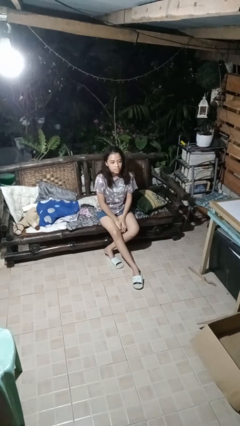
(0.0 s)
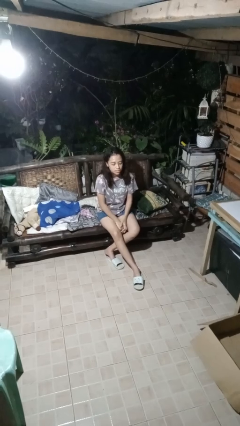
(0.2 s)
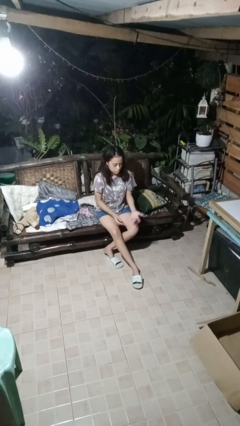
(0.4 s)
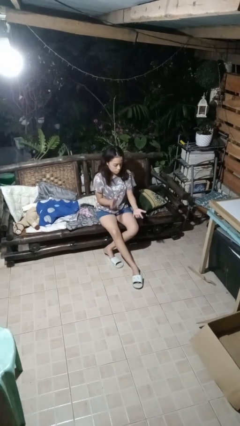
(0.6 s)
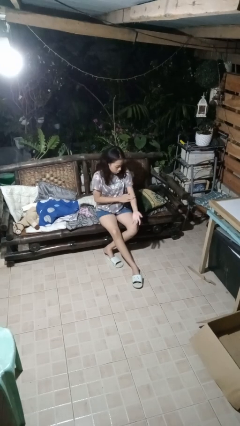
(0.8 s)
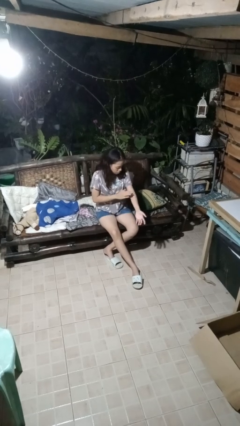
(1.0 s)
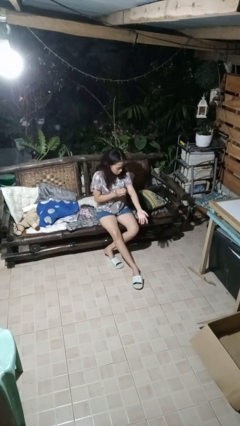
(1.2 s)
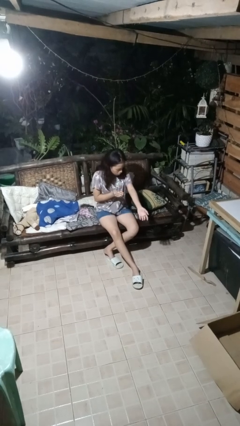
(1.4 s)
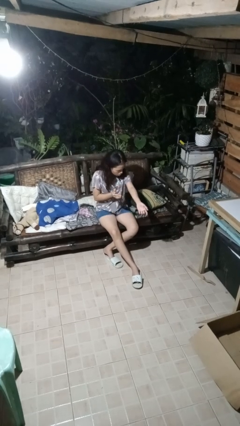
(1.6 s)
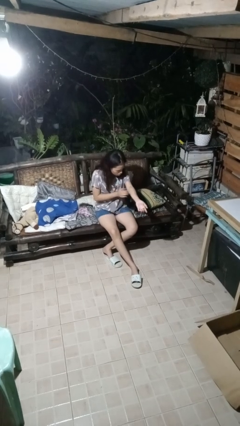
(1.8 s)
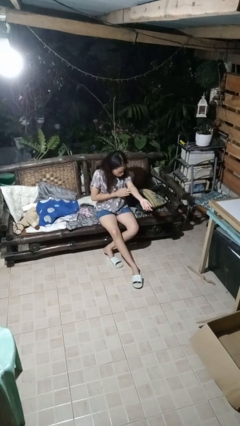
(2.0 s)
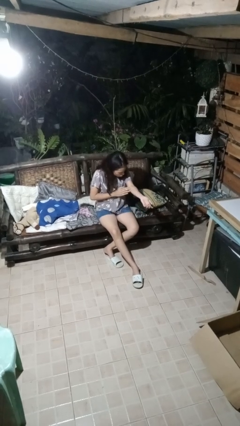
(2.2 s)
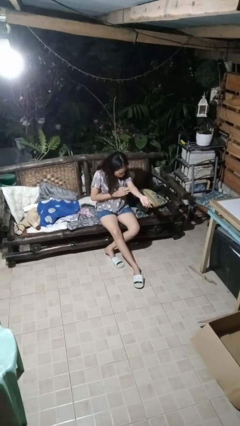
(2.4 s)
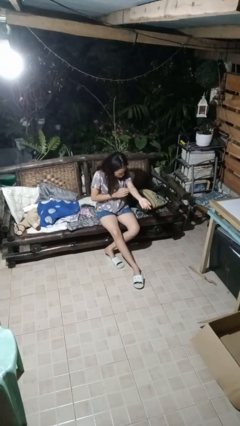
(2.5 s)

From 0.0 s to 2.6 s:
person swats bug

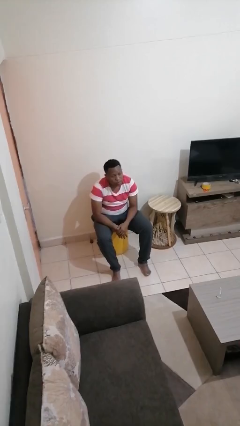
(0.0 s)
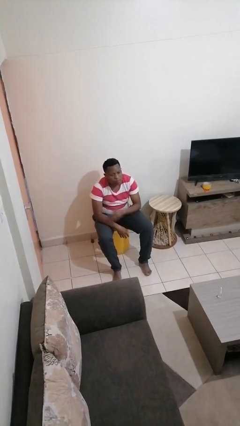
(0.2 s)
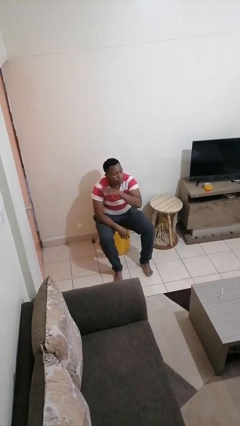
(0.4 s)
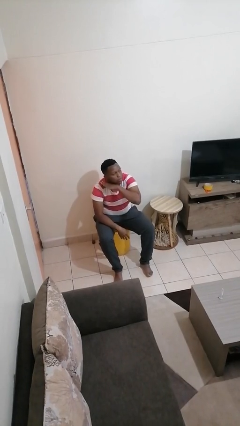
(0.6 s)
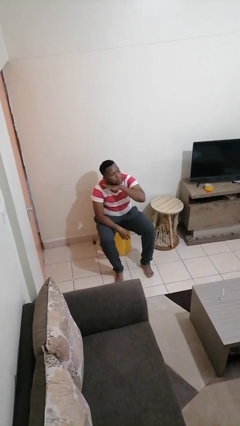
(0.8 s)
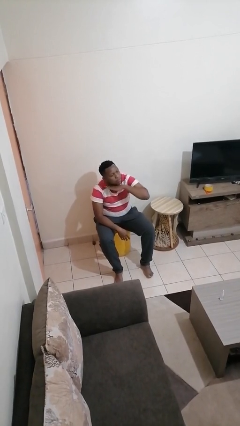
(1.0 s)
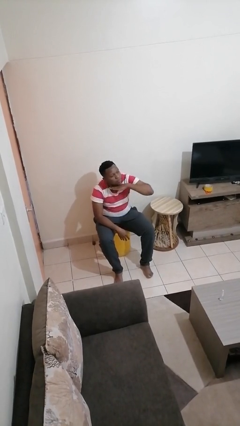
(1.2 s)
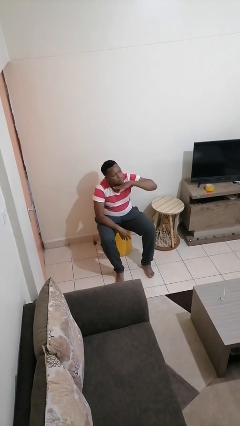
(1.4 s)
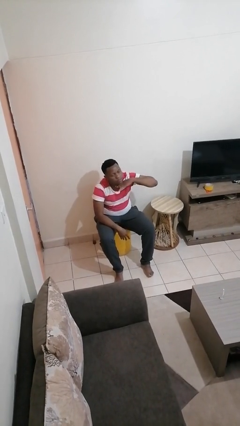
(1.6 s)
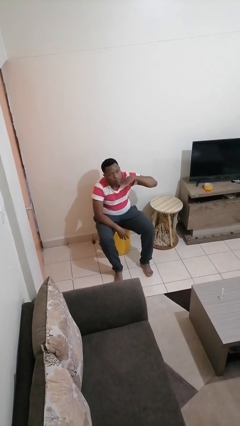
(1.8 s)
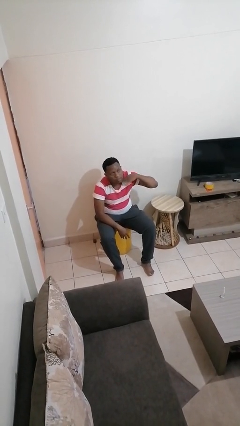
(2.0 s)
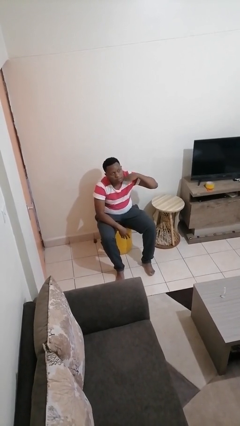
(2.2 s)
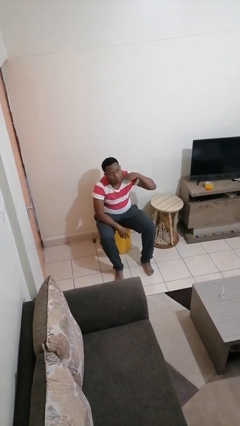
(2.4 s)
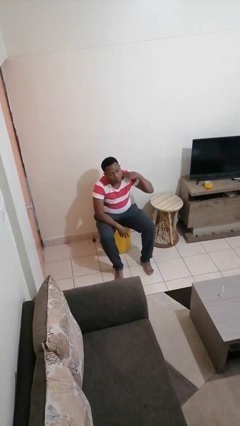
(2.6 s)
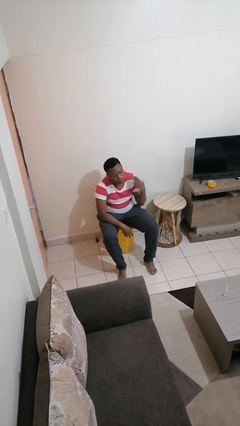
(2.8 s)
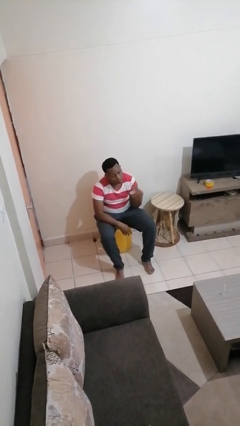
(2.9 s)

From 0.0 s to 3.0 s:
person gestures cut

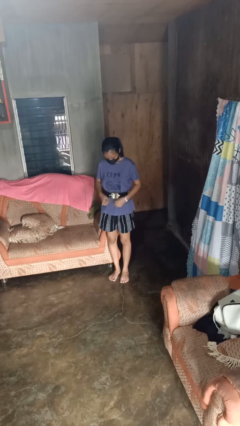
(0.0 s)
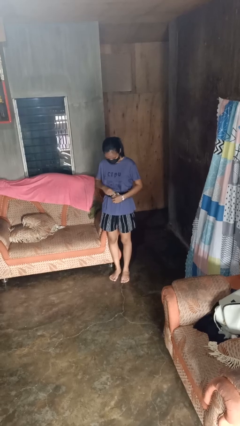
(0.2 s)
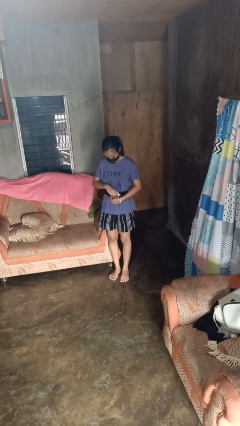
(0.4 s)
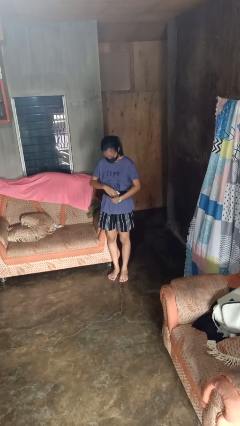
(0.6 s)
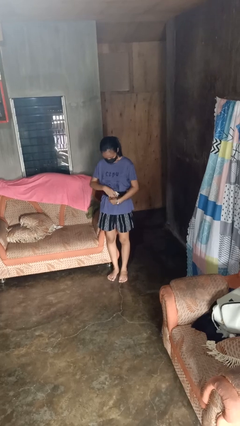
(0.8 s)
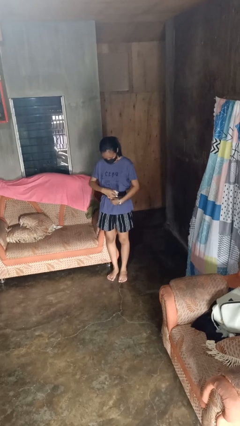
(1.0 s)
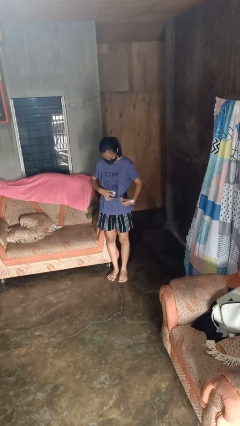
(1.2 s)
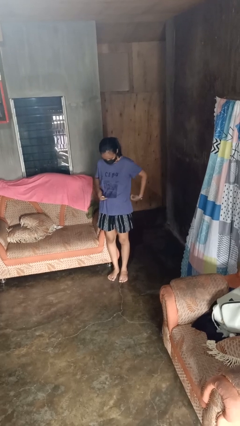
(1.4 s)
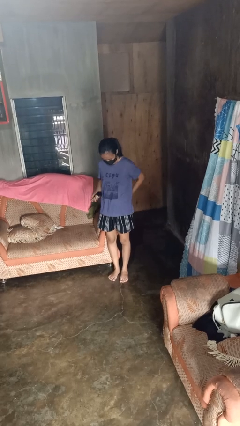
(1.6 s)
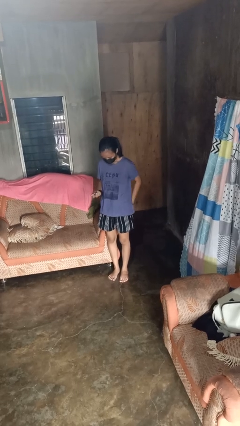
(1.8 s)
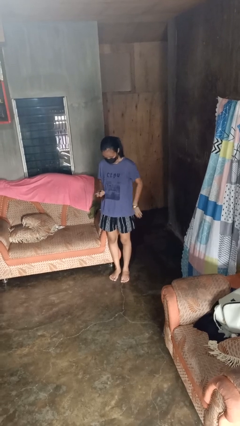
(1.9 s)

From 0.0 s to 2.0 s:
person takes off belt

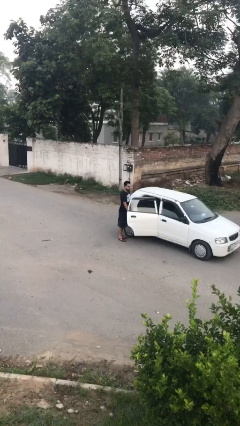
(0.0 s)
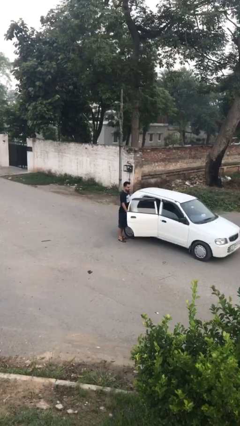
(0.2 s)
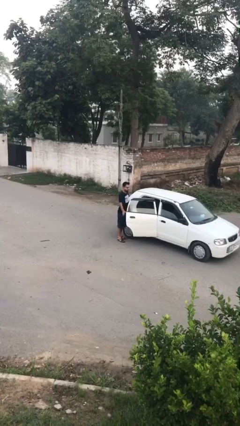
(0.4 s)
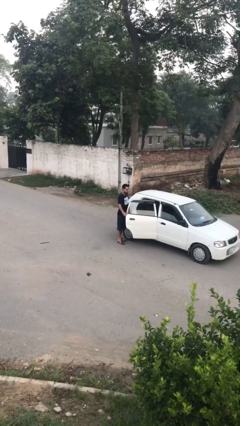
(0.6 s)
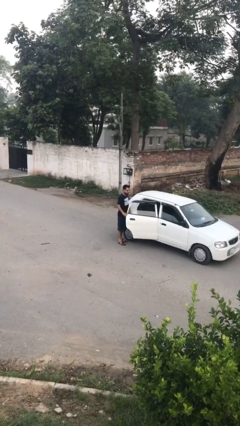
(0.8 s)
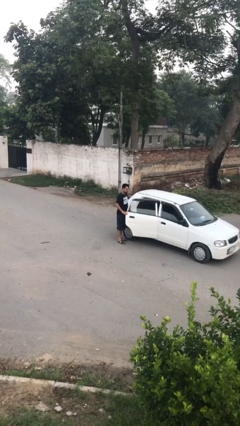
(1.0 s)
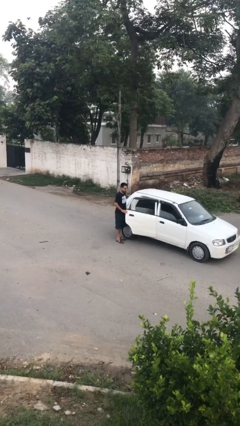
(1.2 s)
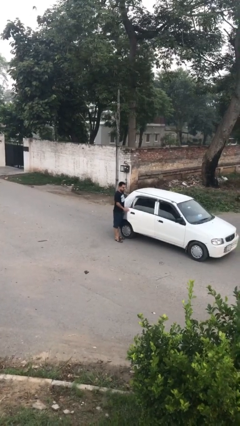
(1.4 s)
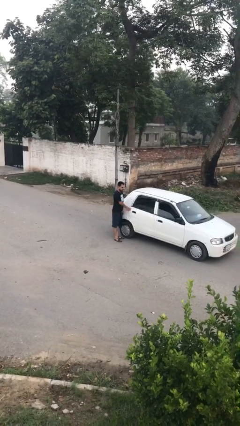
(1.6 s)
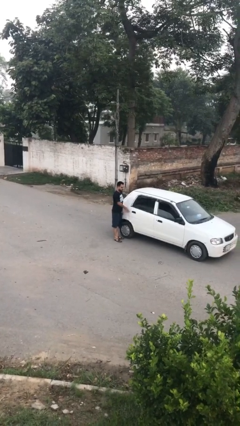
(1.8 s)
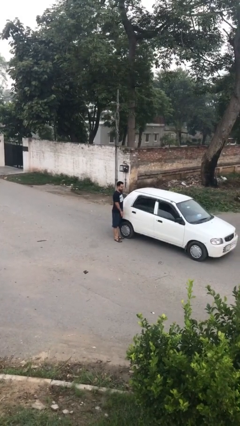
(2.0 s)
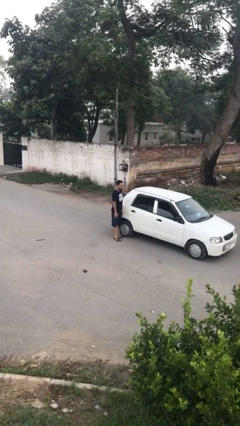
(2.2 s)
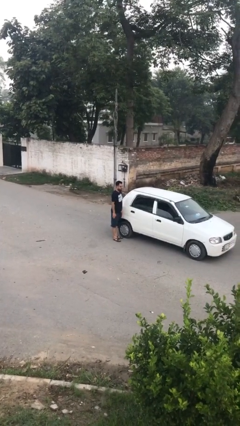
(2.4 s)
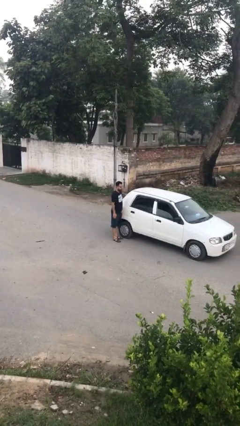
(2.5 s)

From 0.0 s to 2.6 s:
person closes car door

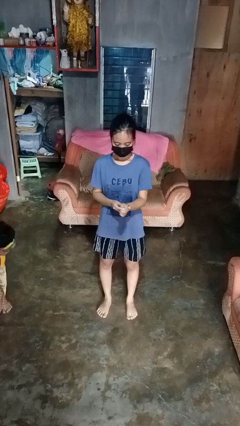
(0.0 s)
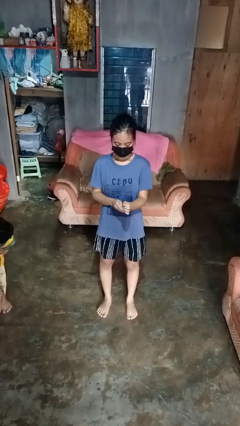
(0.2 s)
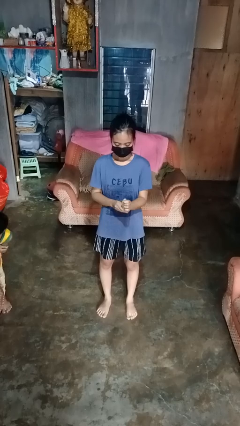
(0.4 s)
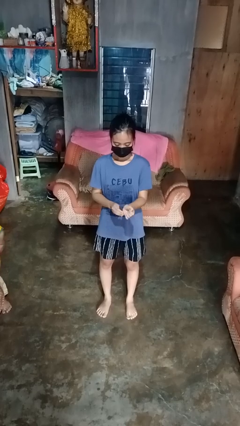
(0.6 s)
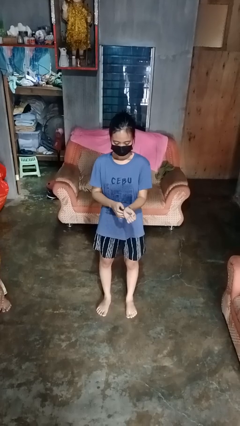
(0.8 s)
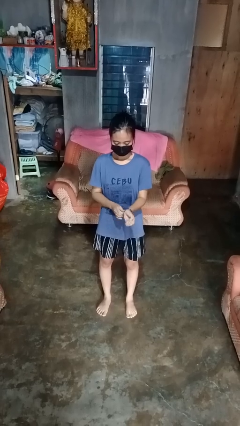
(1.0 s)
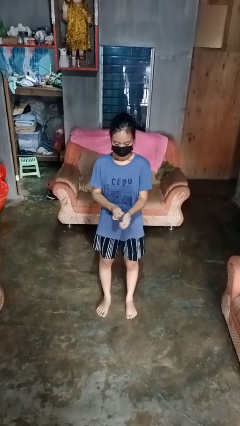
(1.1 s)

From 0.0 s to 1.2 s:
person takes off wristwatch

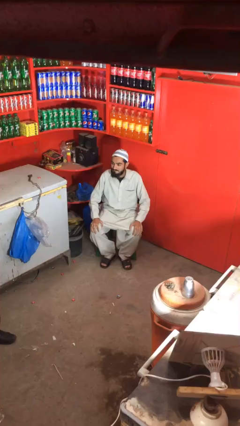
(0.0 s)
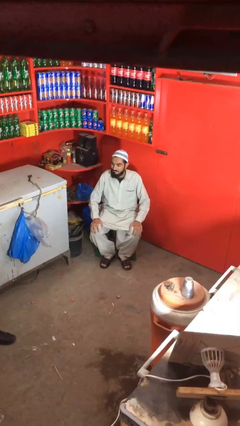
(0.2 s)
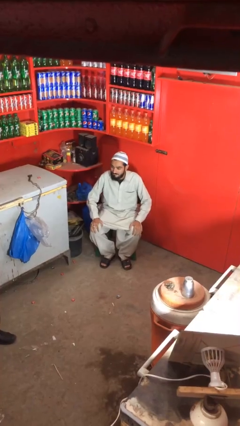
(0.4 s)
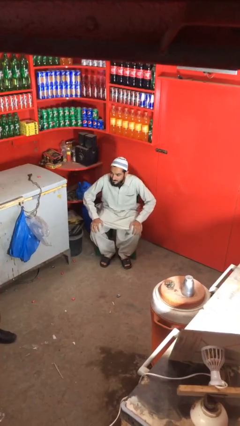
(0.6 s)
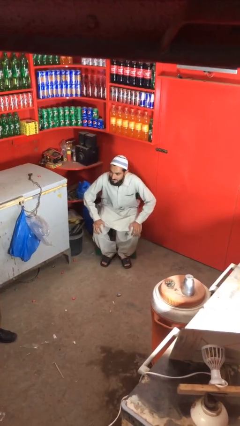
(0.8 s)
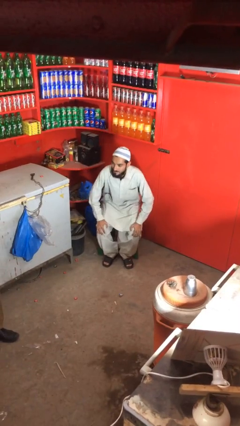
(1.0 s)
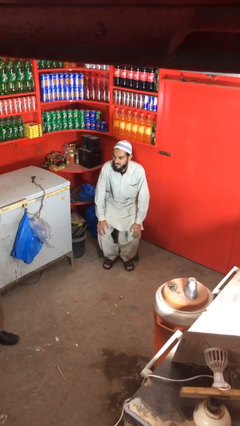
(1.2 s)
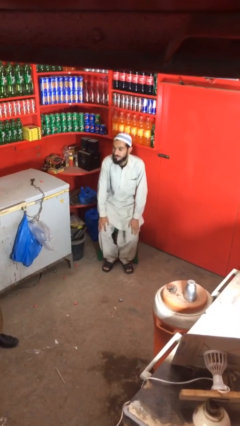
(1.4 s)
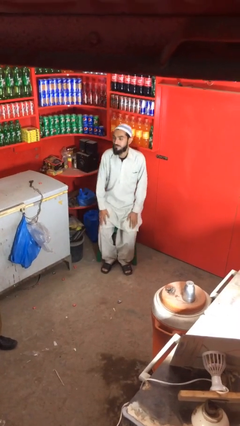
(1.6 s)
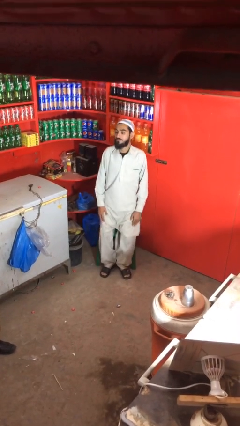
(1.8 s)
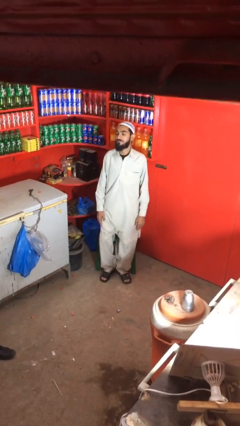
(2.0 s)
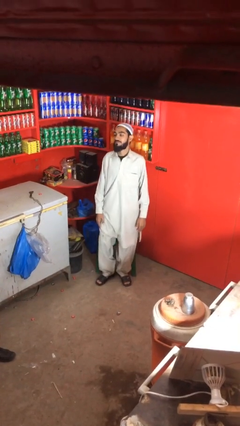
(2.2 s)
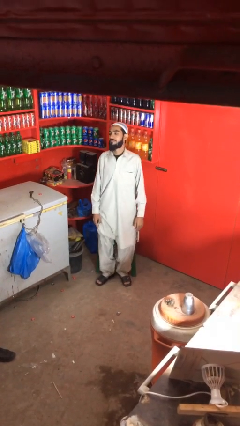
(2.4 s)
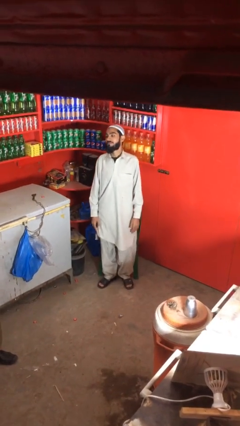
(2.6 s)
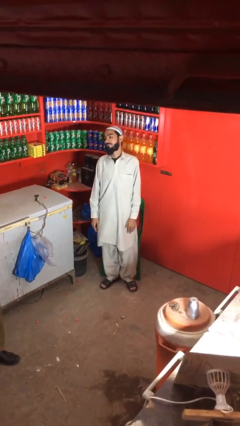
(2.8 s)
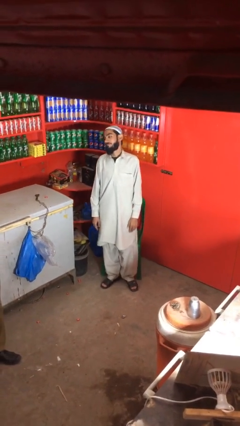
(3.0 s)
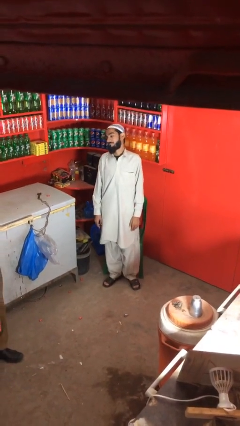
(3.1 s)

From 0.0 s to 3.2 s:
person stands up

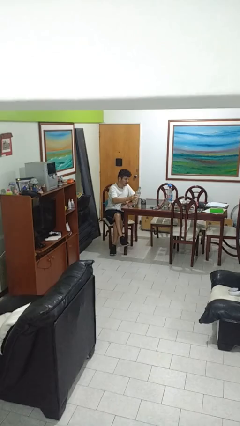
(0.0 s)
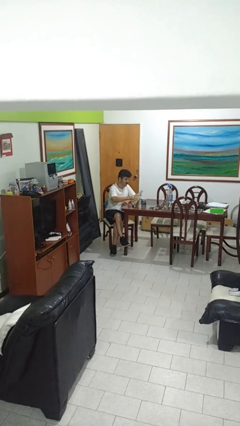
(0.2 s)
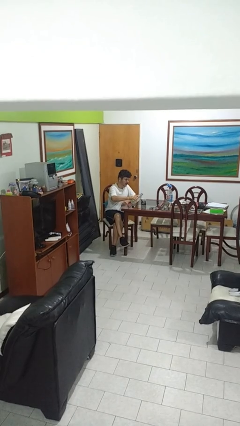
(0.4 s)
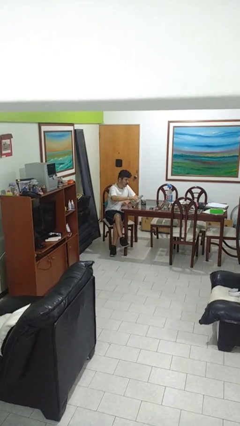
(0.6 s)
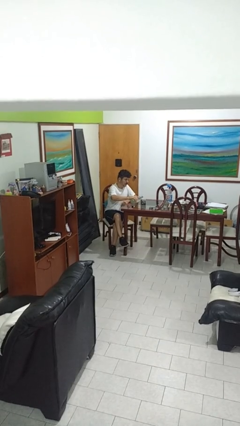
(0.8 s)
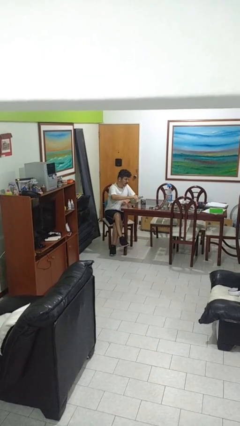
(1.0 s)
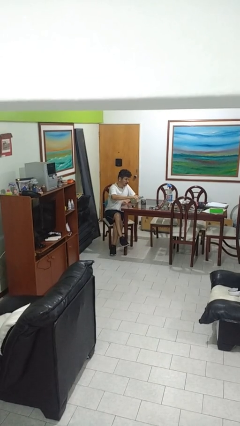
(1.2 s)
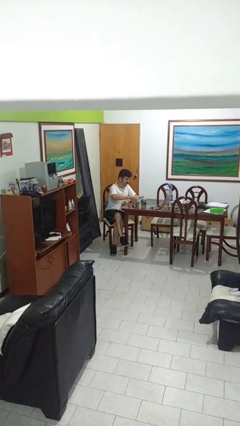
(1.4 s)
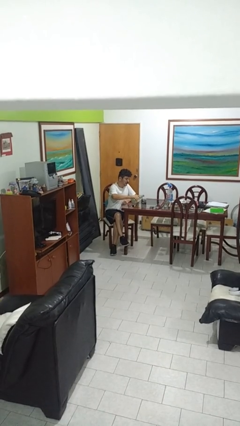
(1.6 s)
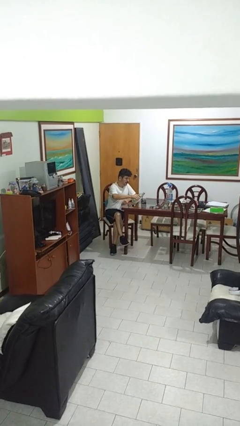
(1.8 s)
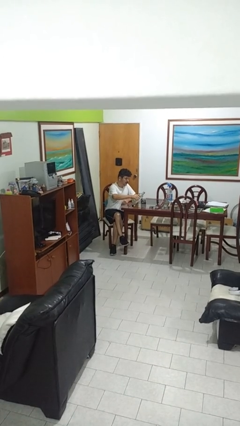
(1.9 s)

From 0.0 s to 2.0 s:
person pours liquid into cup

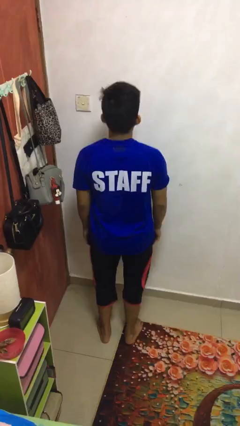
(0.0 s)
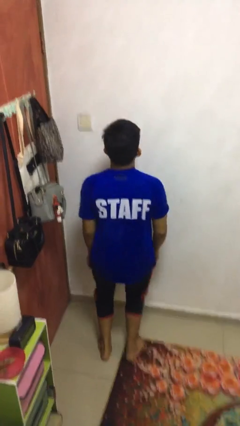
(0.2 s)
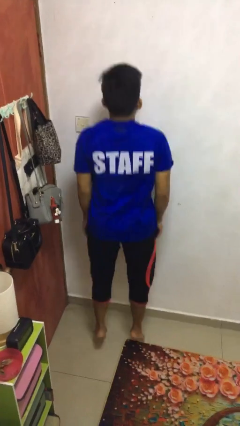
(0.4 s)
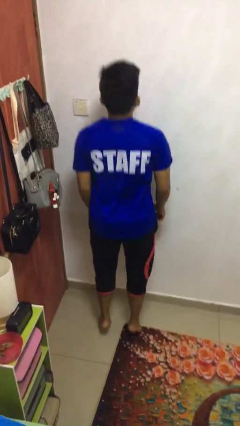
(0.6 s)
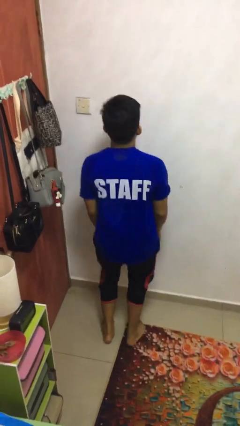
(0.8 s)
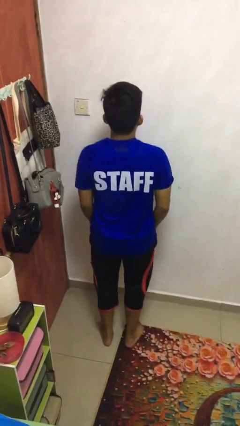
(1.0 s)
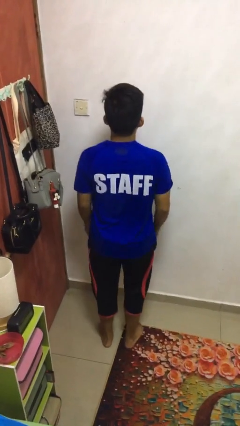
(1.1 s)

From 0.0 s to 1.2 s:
person jumps
